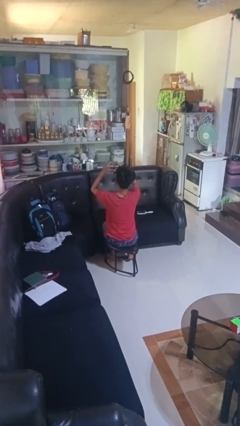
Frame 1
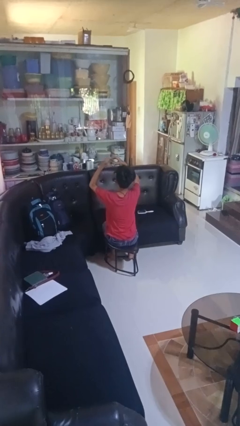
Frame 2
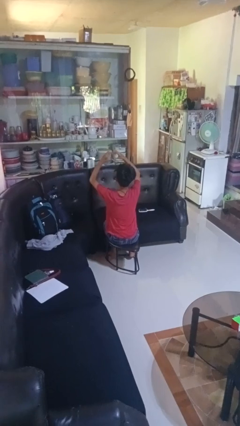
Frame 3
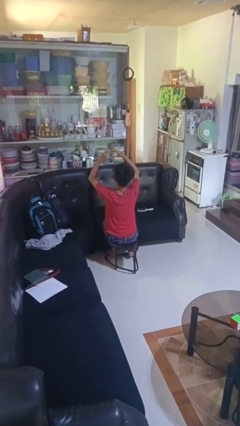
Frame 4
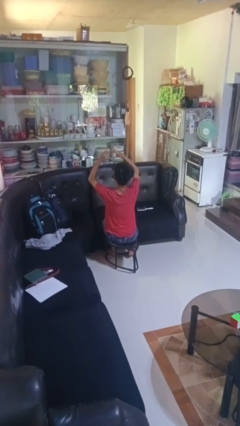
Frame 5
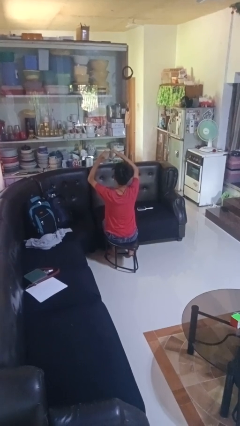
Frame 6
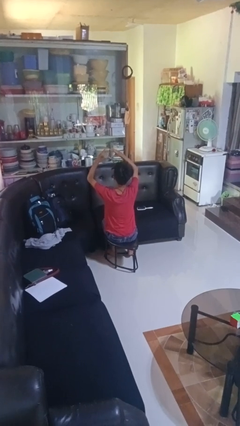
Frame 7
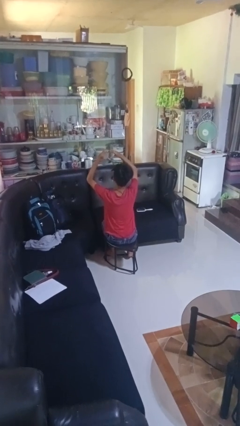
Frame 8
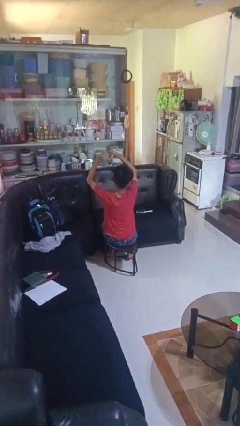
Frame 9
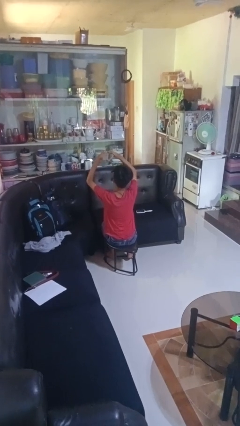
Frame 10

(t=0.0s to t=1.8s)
person gestures heart

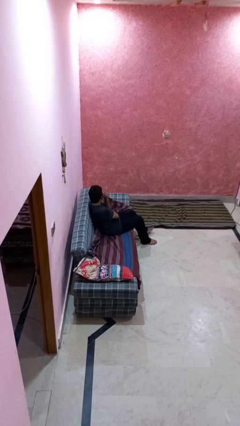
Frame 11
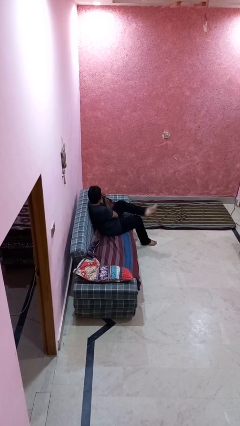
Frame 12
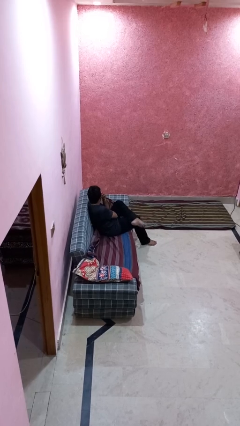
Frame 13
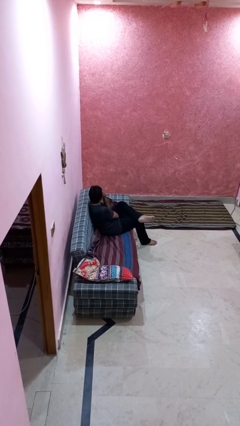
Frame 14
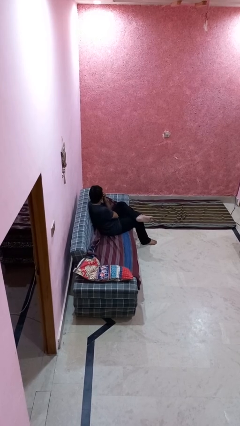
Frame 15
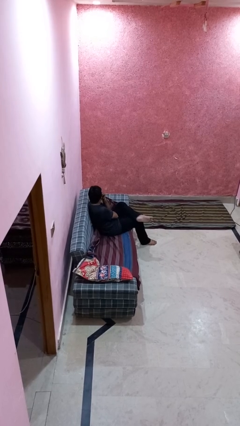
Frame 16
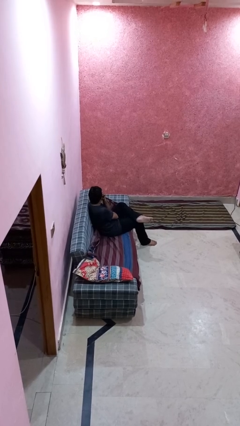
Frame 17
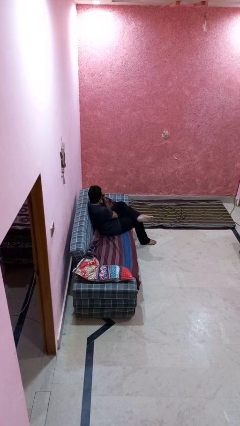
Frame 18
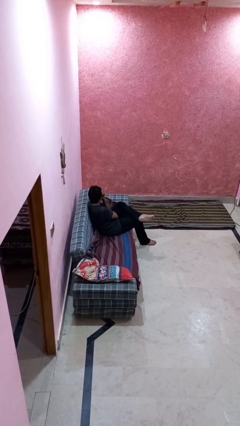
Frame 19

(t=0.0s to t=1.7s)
person crosses legs

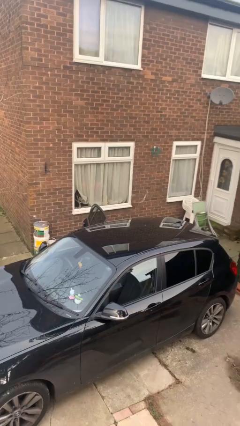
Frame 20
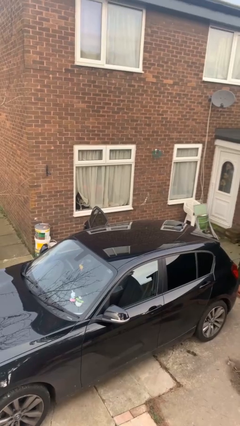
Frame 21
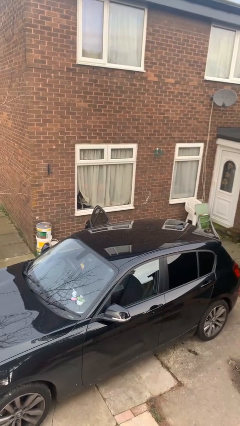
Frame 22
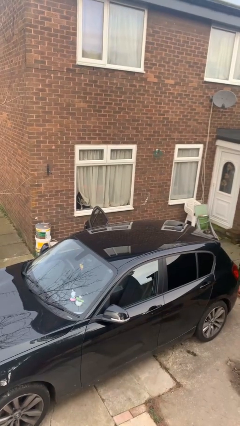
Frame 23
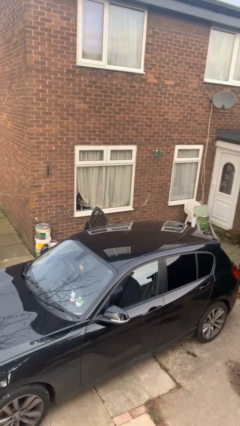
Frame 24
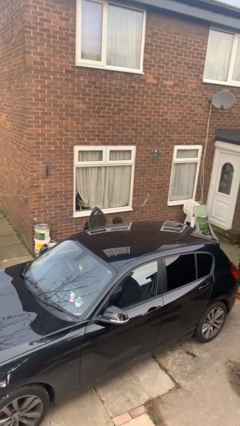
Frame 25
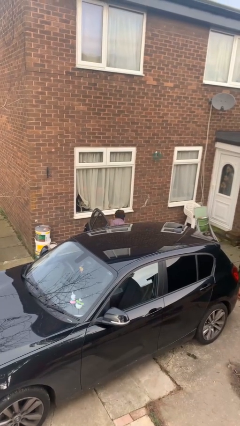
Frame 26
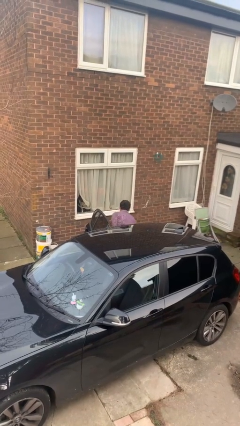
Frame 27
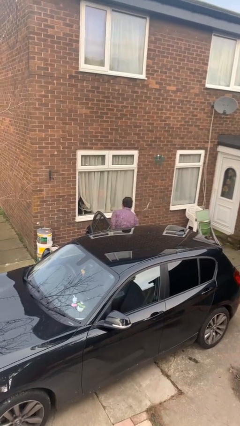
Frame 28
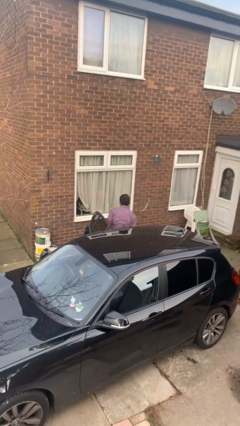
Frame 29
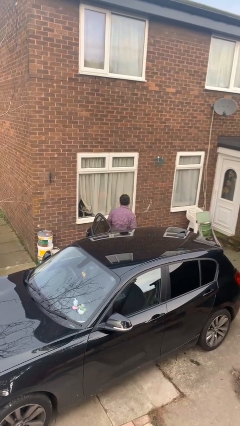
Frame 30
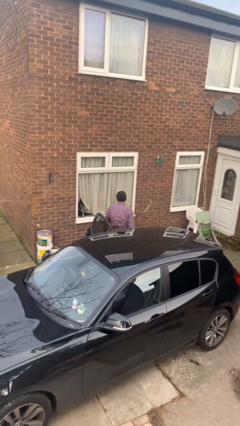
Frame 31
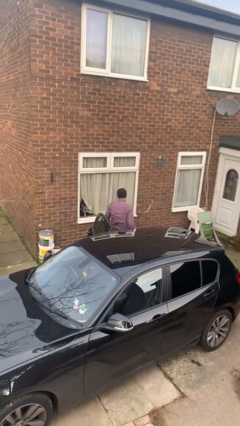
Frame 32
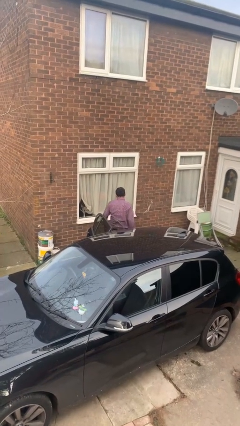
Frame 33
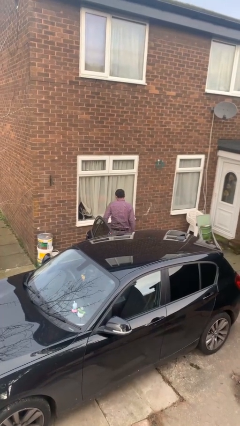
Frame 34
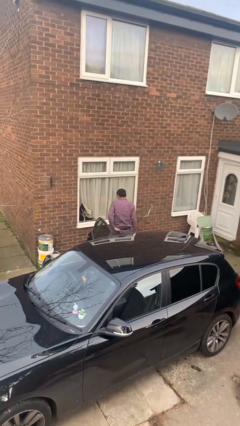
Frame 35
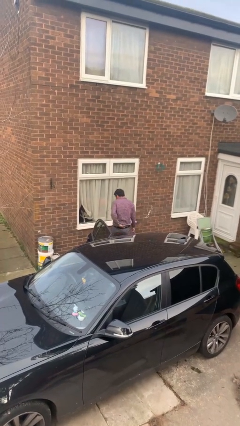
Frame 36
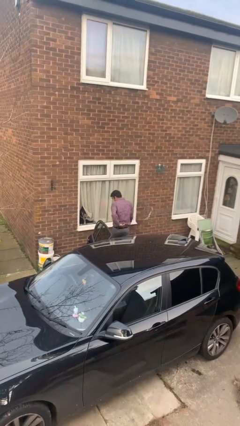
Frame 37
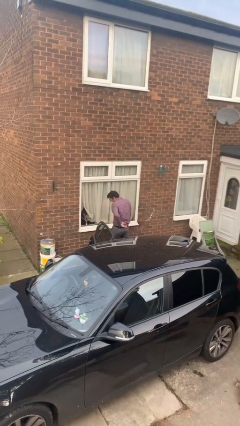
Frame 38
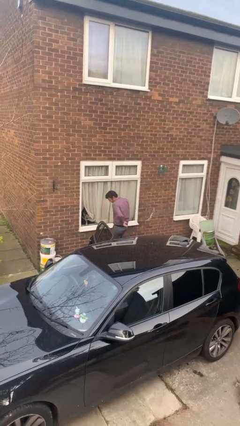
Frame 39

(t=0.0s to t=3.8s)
person exits car

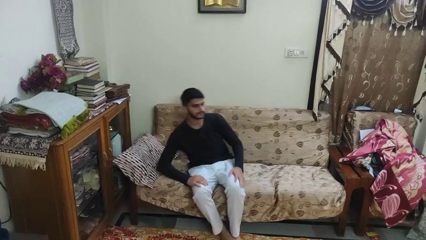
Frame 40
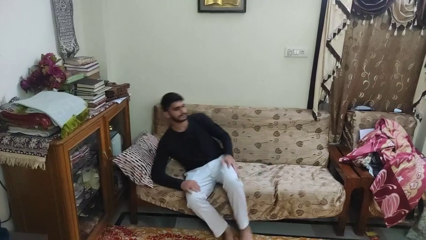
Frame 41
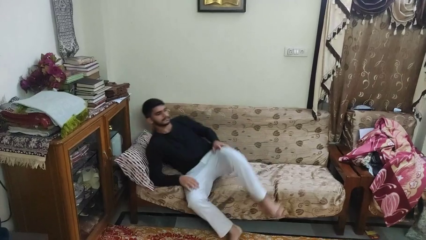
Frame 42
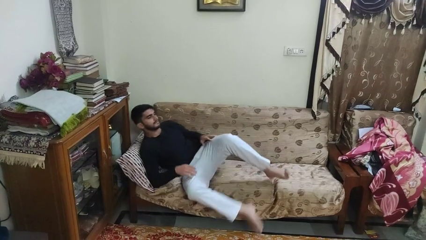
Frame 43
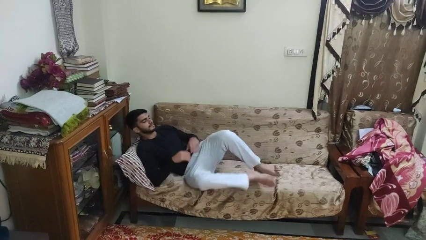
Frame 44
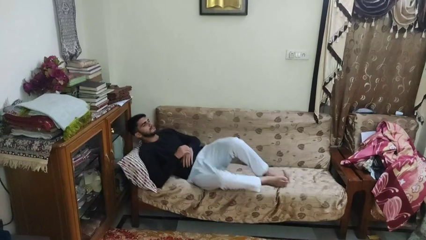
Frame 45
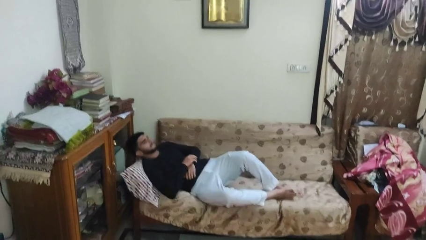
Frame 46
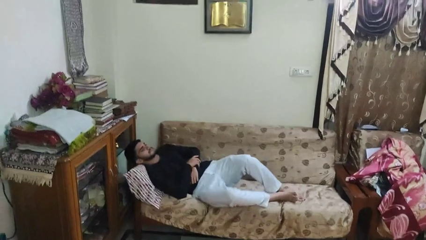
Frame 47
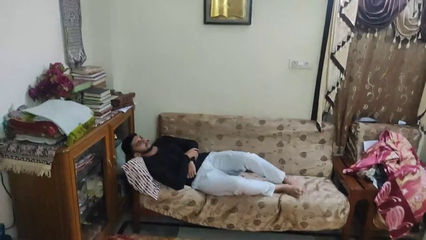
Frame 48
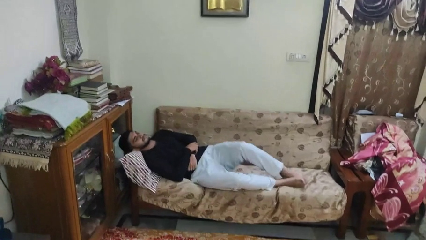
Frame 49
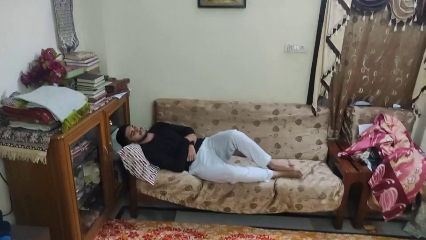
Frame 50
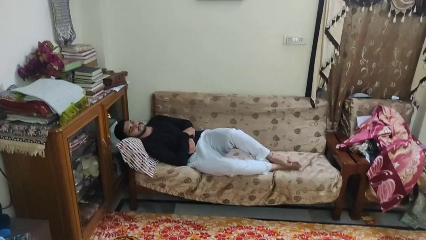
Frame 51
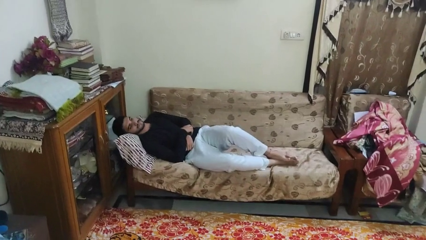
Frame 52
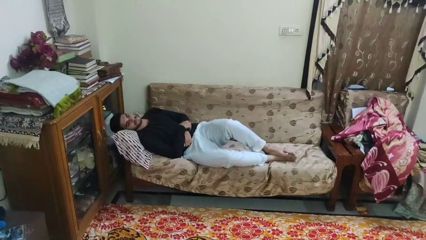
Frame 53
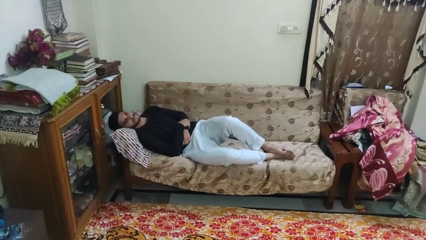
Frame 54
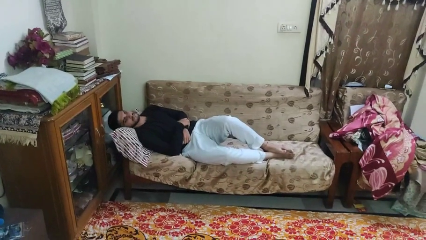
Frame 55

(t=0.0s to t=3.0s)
person lies down on couch

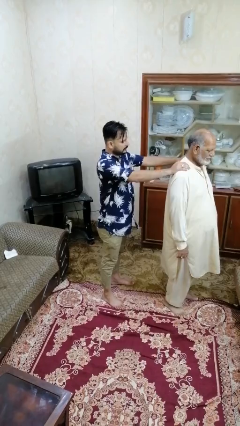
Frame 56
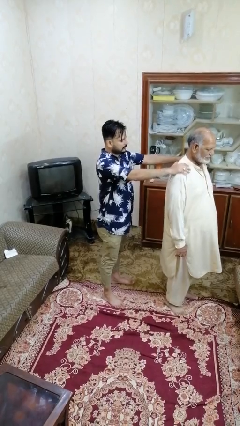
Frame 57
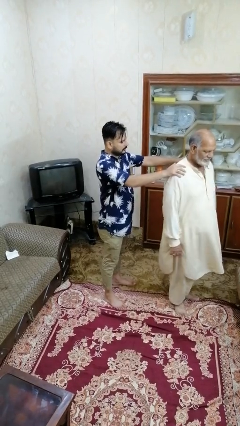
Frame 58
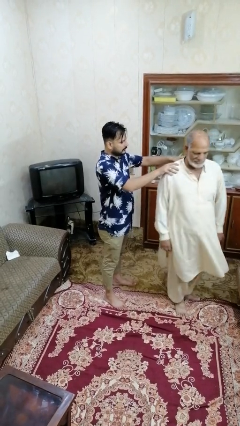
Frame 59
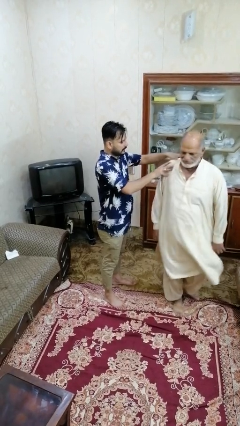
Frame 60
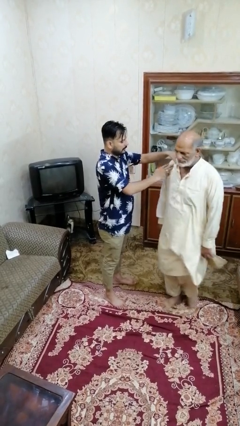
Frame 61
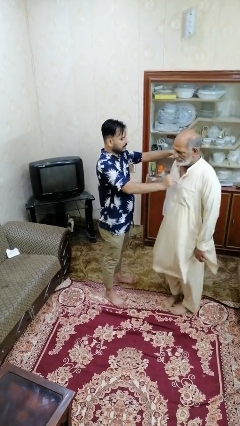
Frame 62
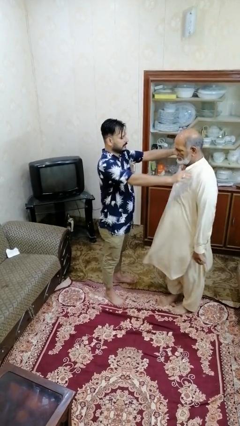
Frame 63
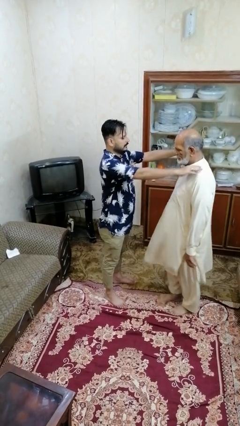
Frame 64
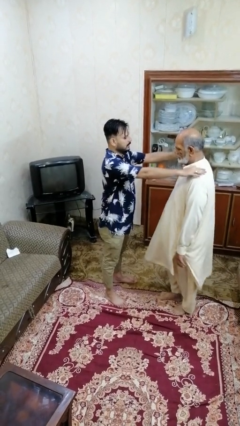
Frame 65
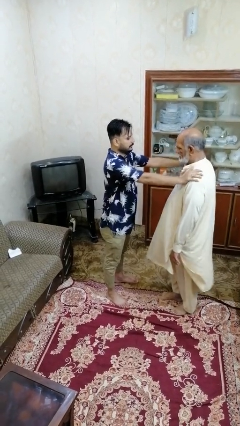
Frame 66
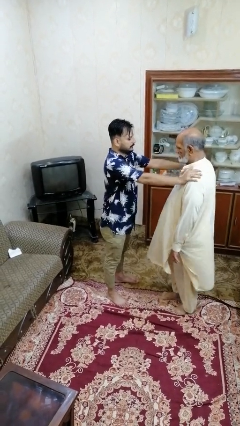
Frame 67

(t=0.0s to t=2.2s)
person spins person around

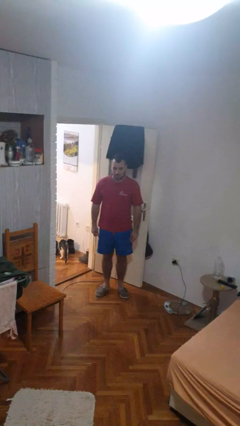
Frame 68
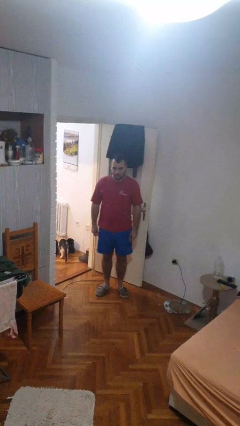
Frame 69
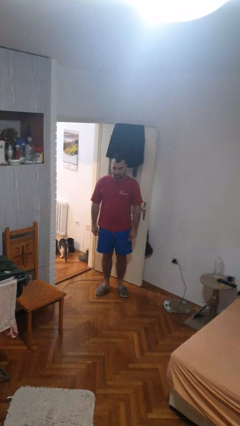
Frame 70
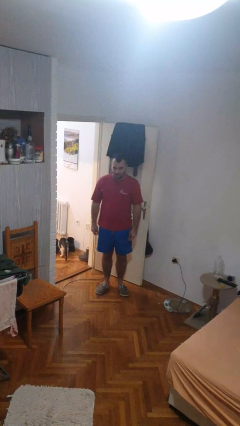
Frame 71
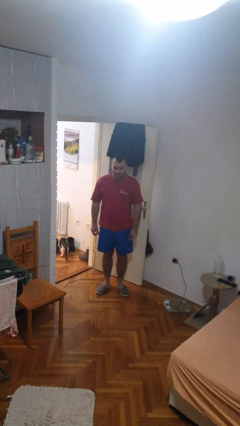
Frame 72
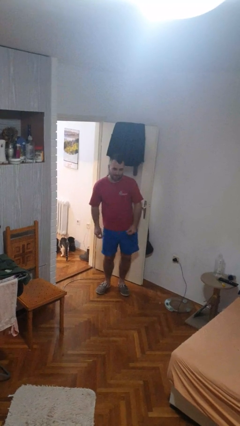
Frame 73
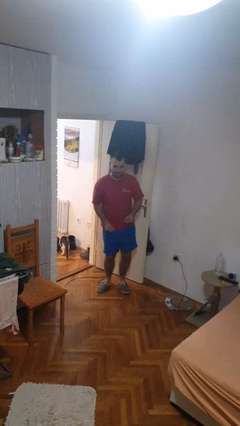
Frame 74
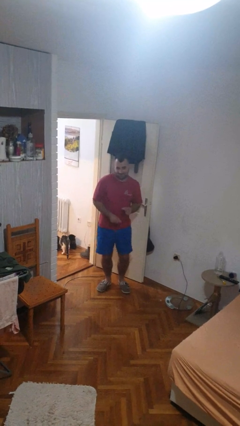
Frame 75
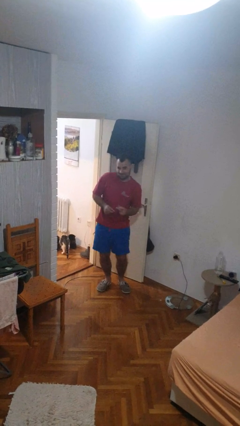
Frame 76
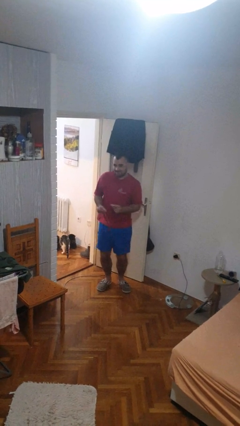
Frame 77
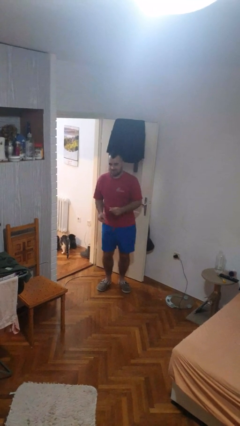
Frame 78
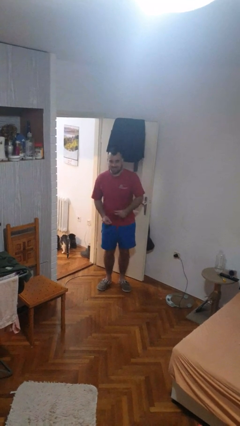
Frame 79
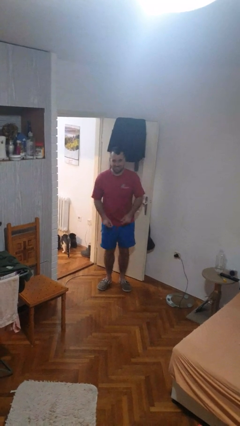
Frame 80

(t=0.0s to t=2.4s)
person dances in place

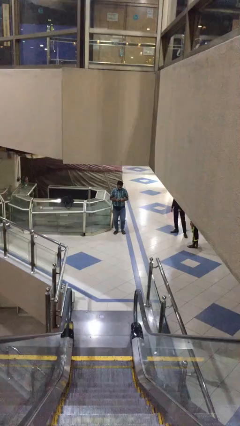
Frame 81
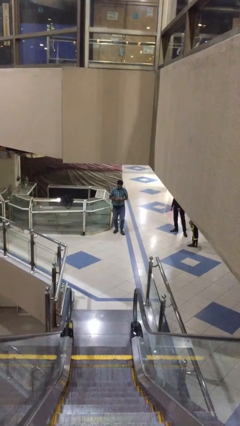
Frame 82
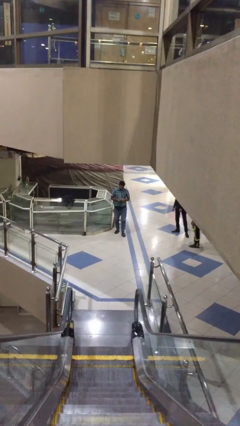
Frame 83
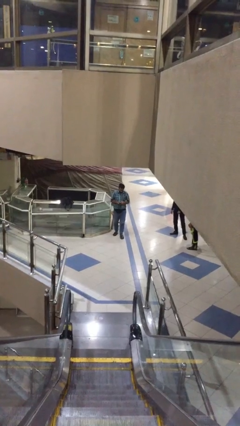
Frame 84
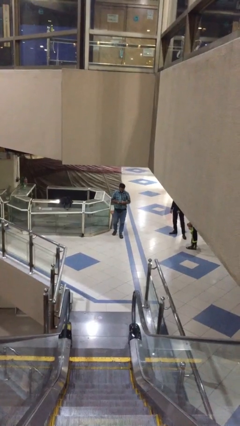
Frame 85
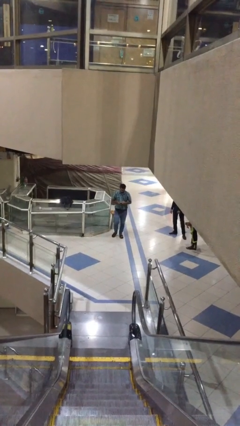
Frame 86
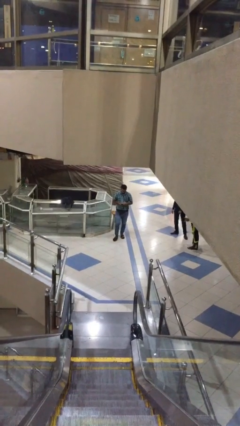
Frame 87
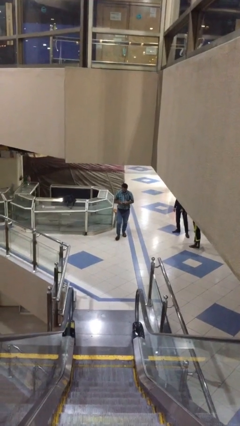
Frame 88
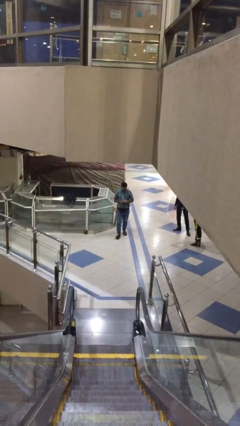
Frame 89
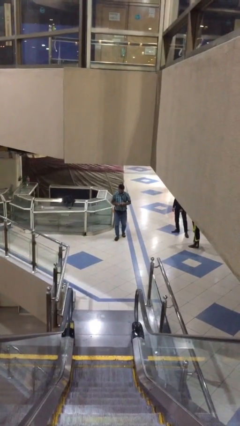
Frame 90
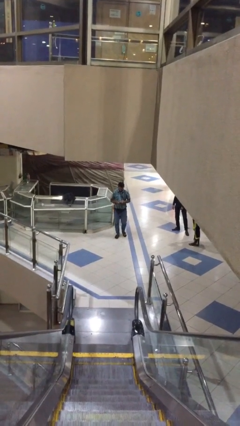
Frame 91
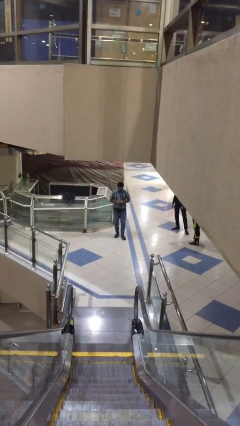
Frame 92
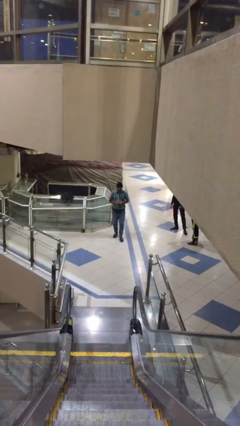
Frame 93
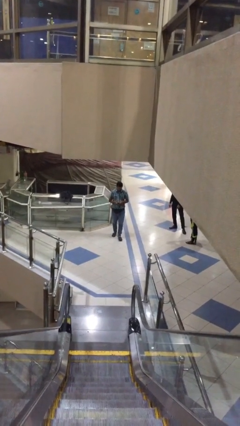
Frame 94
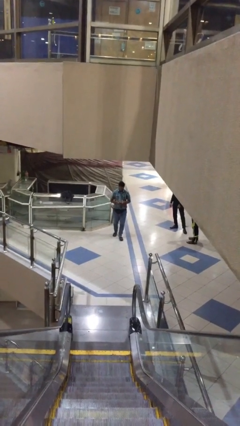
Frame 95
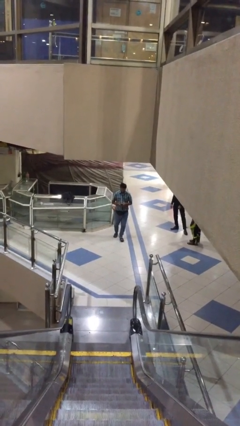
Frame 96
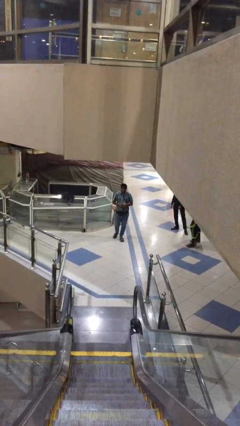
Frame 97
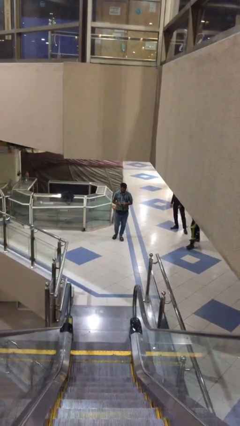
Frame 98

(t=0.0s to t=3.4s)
person texts on phone
